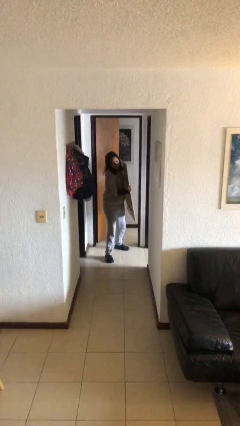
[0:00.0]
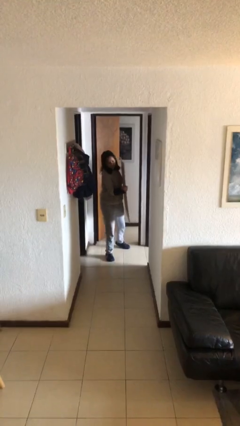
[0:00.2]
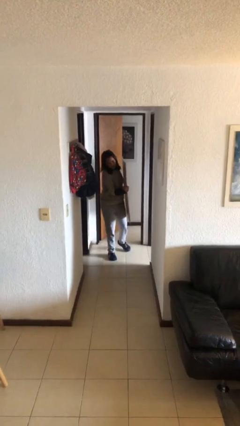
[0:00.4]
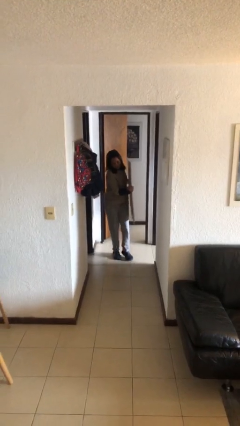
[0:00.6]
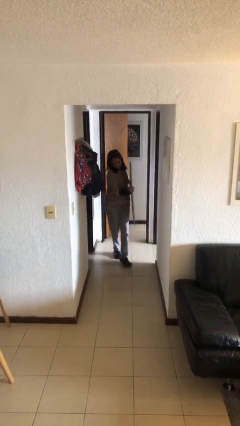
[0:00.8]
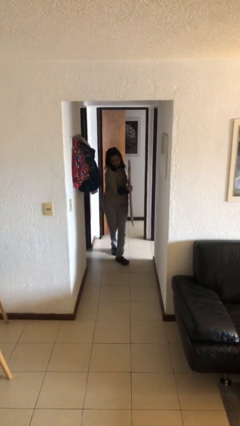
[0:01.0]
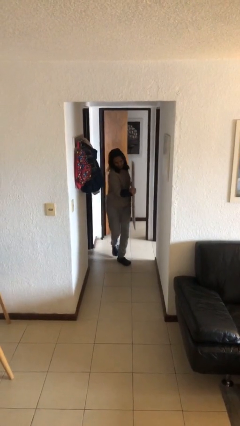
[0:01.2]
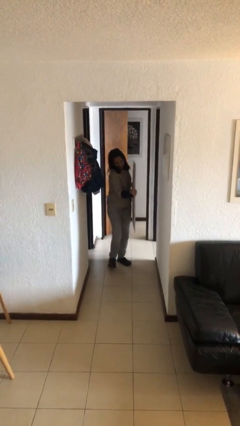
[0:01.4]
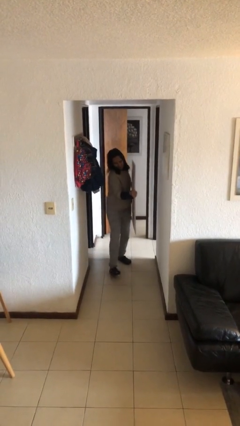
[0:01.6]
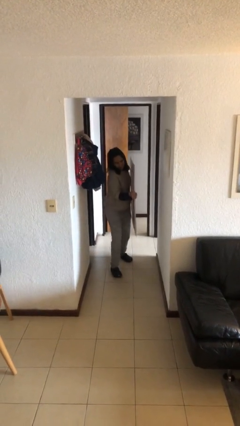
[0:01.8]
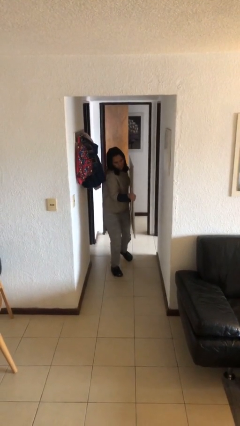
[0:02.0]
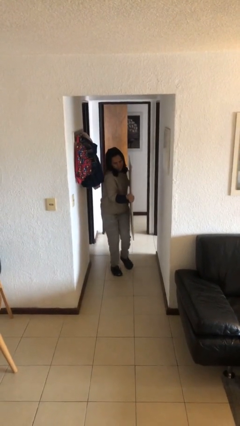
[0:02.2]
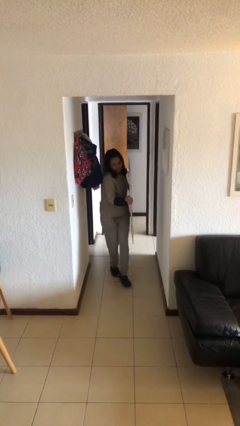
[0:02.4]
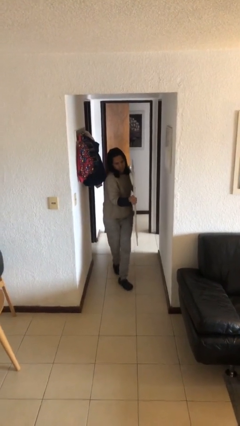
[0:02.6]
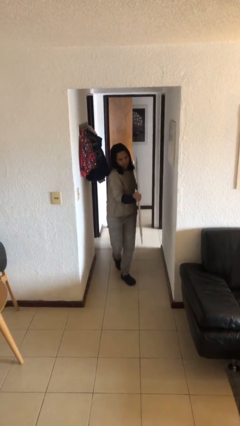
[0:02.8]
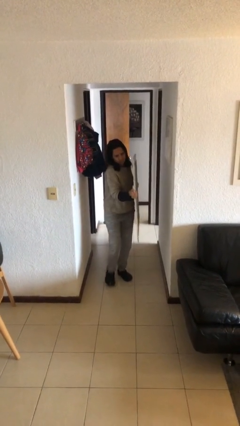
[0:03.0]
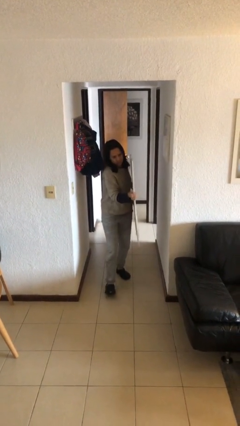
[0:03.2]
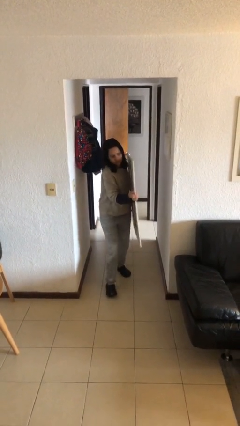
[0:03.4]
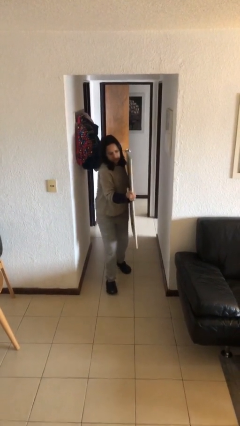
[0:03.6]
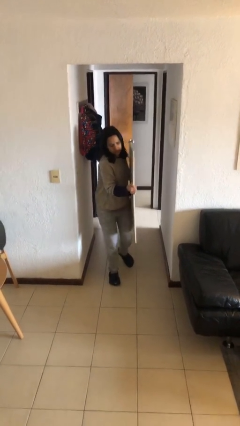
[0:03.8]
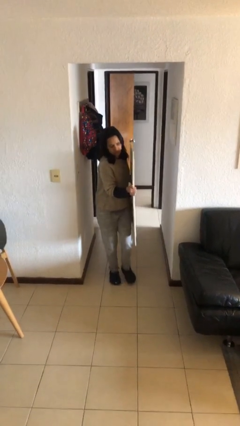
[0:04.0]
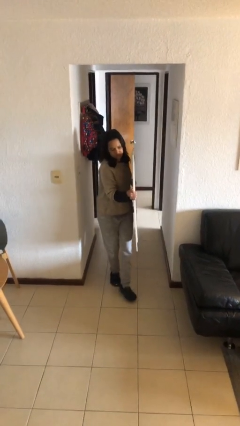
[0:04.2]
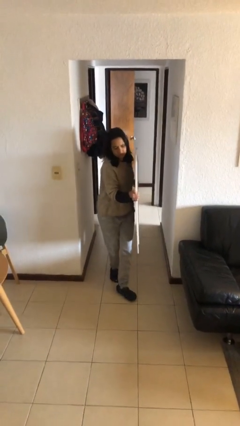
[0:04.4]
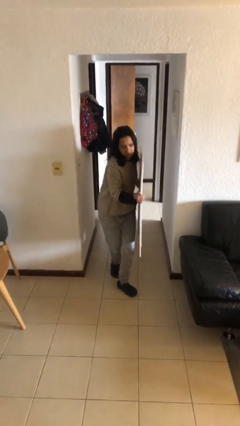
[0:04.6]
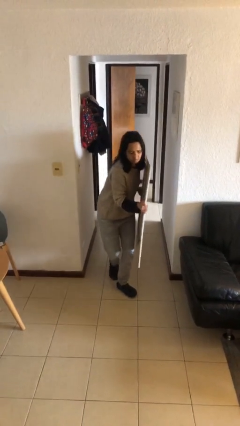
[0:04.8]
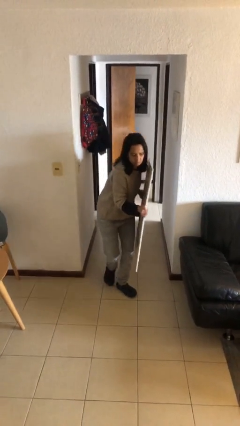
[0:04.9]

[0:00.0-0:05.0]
person carries heavy object

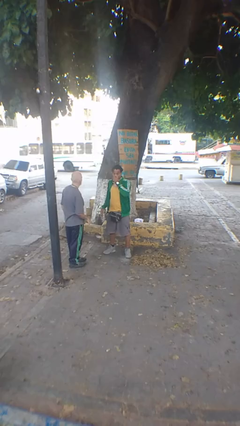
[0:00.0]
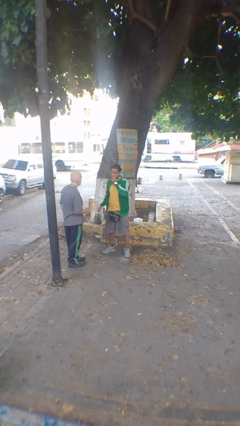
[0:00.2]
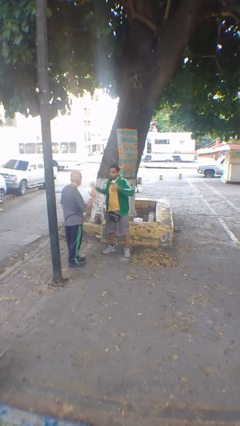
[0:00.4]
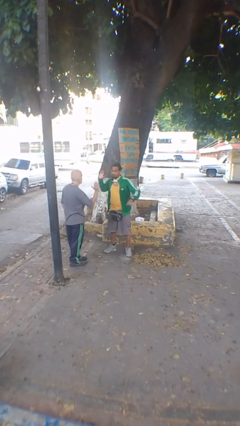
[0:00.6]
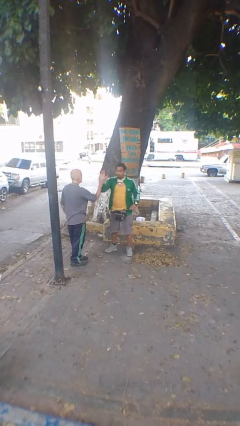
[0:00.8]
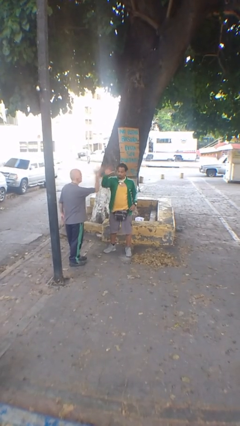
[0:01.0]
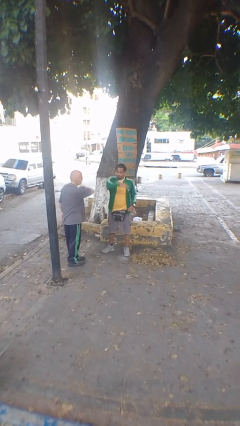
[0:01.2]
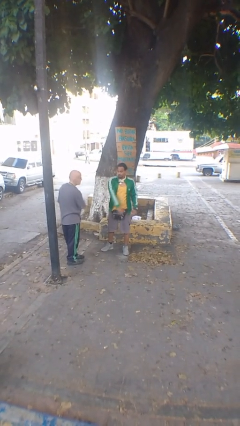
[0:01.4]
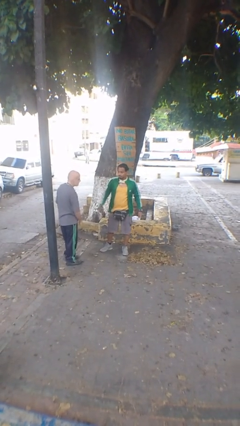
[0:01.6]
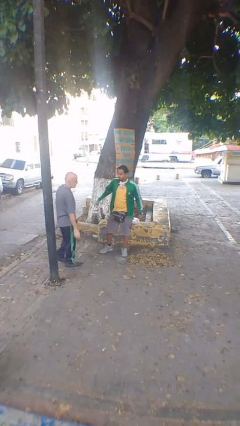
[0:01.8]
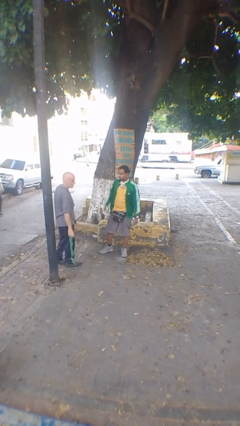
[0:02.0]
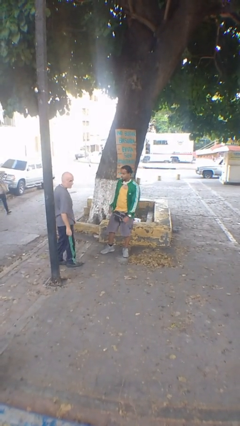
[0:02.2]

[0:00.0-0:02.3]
person highfives hand

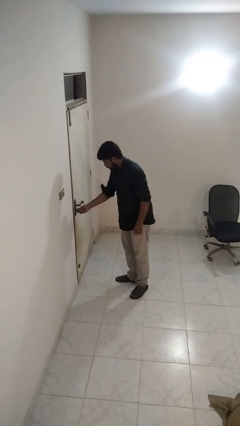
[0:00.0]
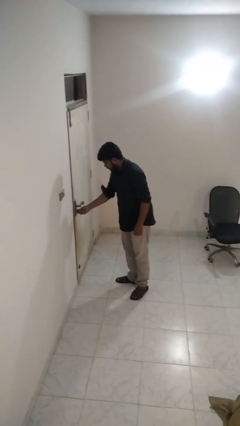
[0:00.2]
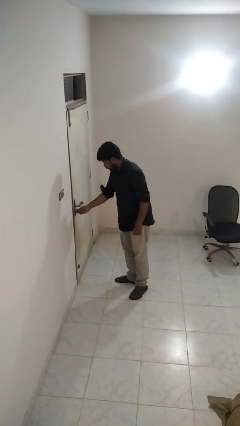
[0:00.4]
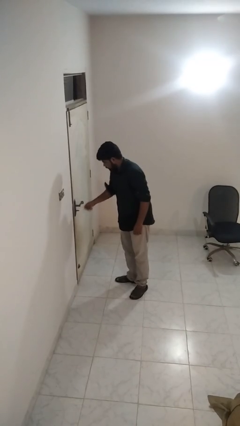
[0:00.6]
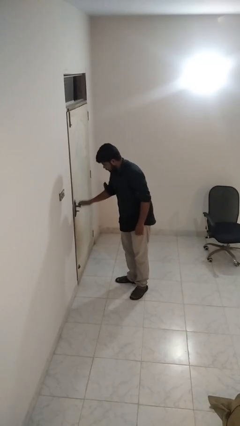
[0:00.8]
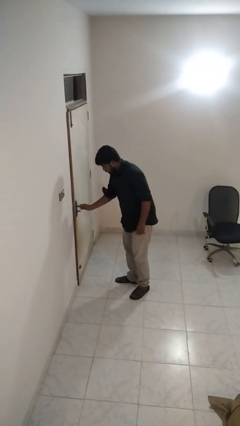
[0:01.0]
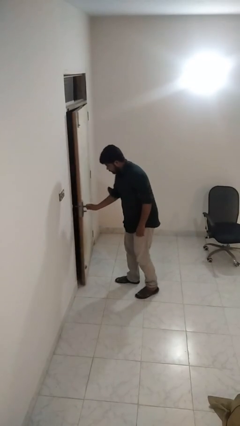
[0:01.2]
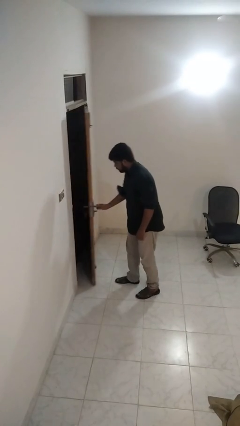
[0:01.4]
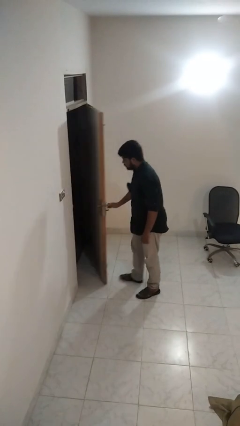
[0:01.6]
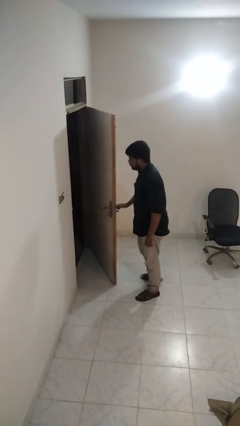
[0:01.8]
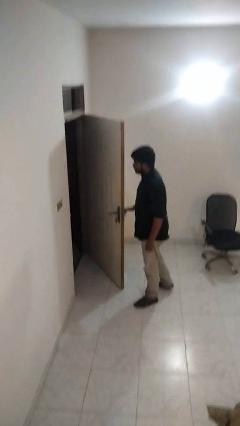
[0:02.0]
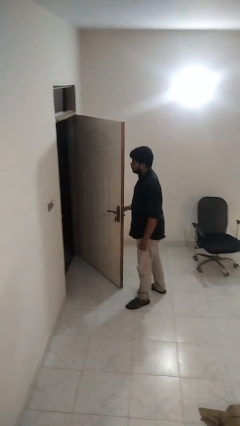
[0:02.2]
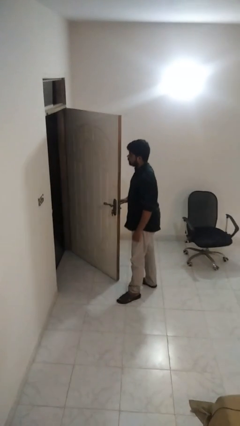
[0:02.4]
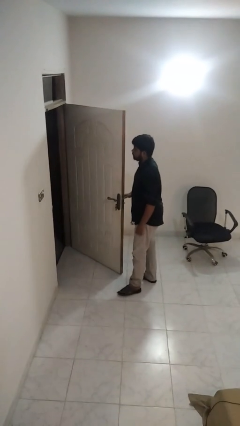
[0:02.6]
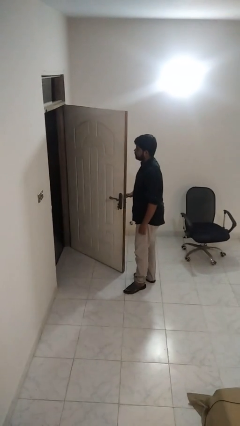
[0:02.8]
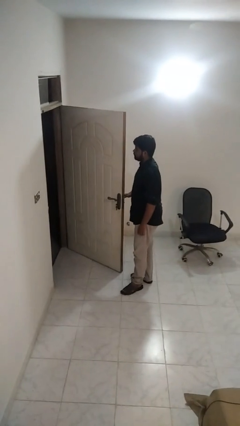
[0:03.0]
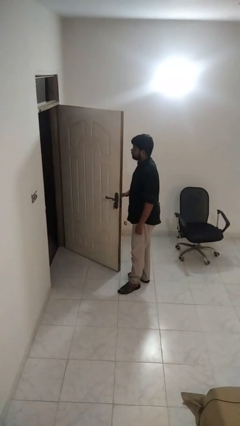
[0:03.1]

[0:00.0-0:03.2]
person opens facility door

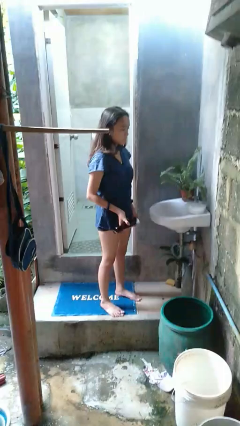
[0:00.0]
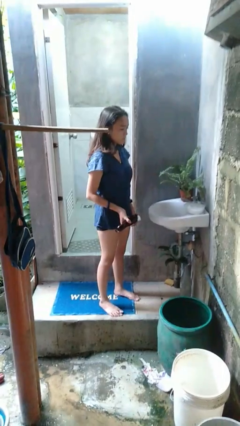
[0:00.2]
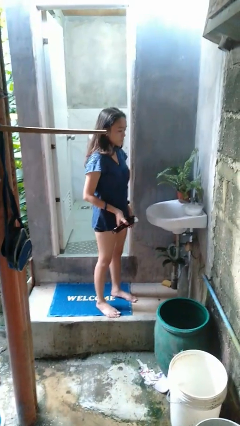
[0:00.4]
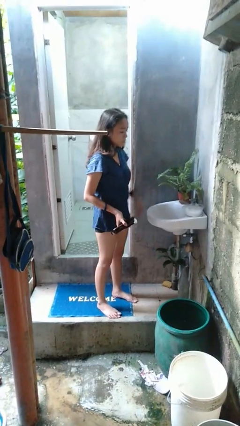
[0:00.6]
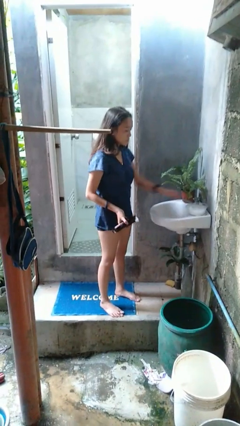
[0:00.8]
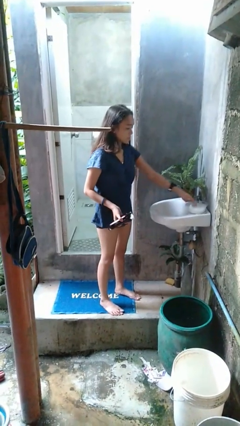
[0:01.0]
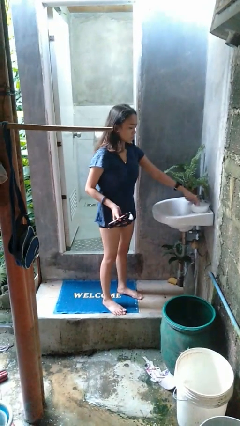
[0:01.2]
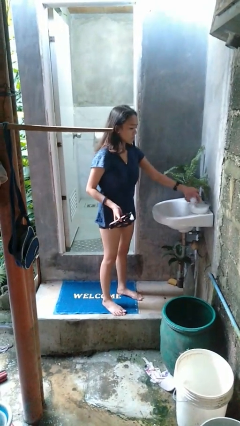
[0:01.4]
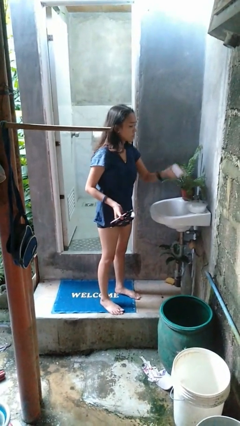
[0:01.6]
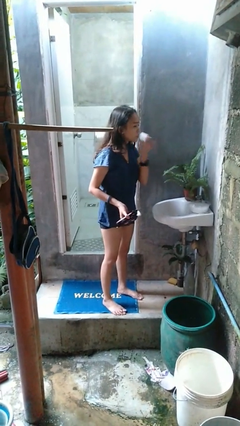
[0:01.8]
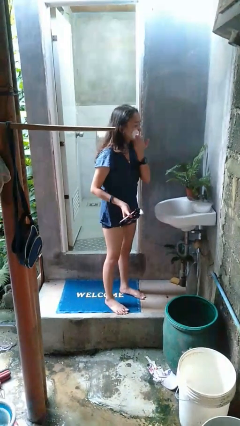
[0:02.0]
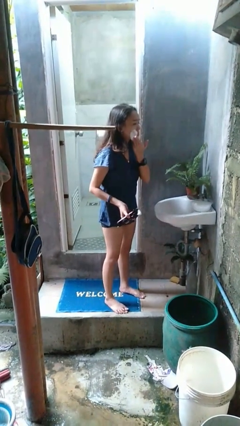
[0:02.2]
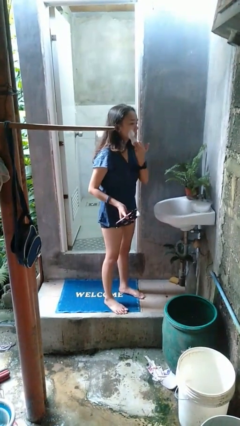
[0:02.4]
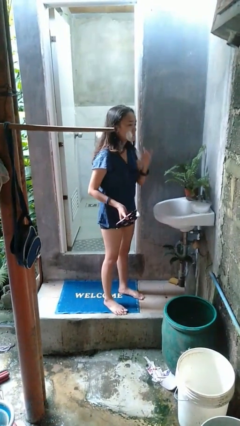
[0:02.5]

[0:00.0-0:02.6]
person applies shaving cream

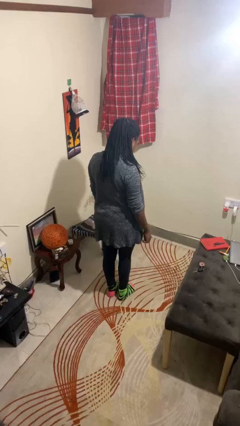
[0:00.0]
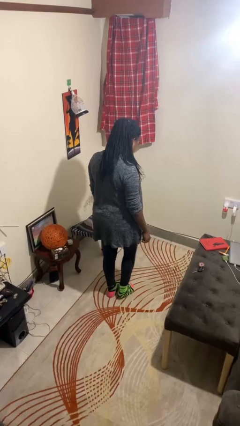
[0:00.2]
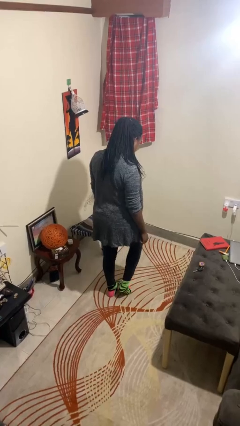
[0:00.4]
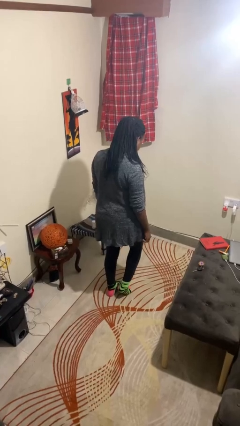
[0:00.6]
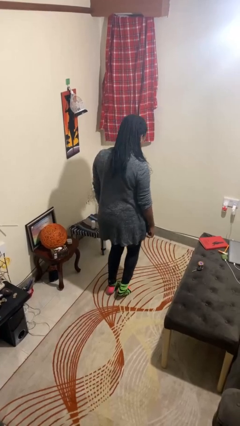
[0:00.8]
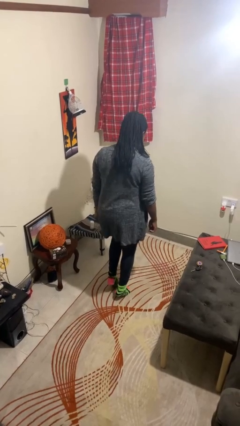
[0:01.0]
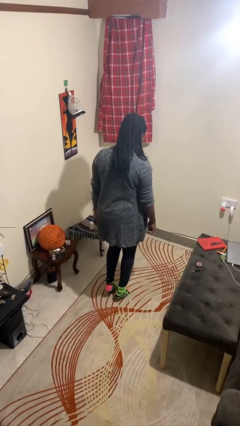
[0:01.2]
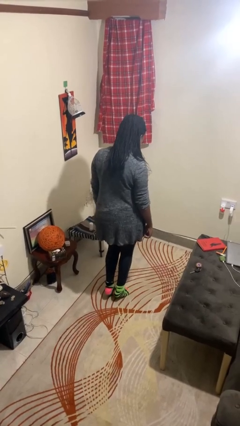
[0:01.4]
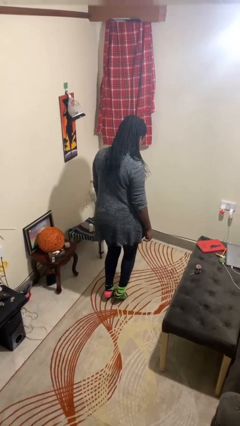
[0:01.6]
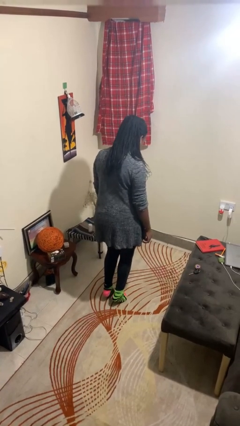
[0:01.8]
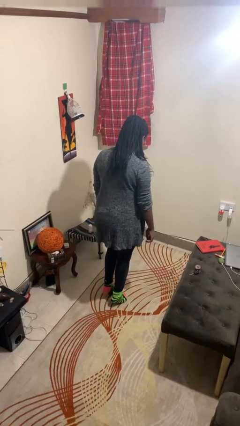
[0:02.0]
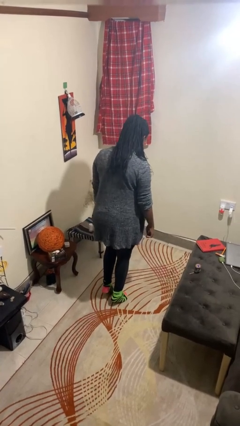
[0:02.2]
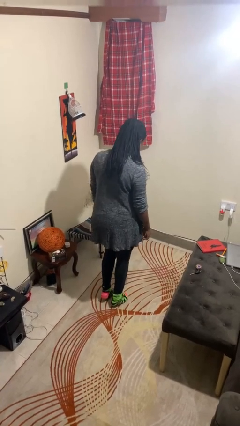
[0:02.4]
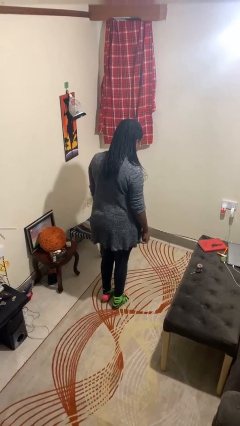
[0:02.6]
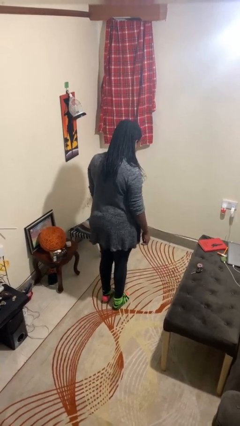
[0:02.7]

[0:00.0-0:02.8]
person walks tiptoe

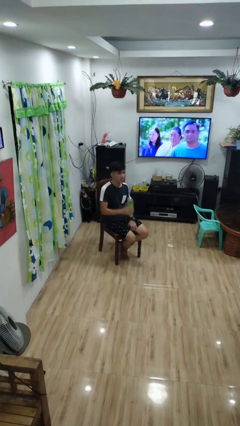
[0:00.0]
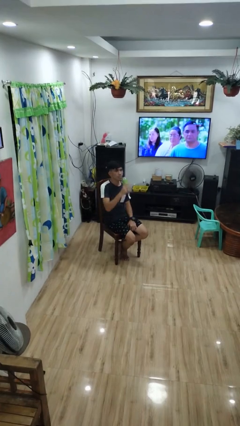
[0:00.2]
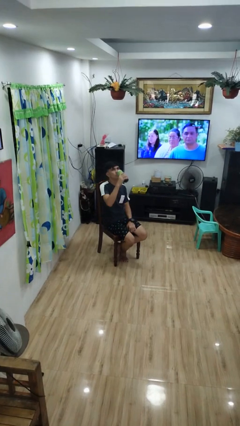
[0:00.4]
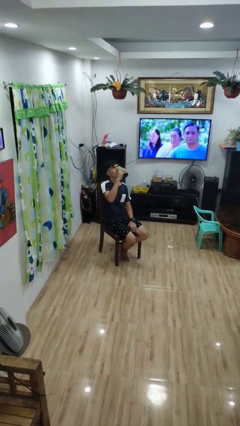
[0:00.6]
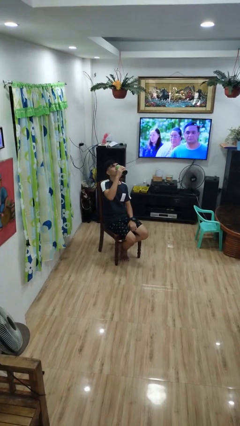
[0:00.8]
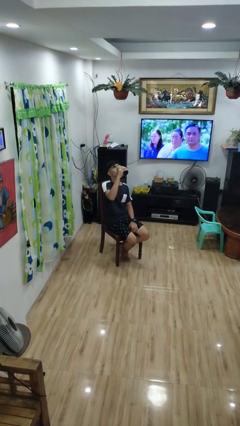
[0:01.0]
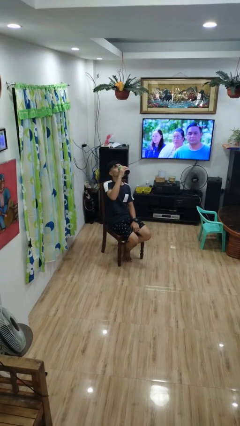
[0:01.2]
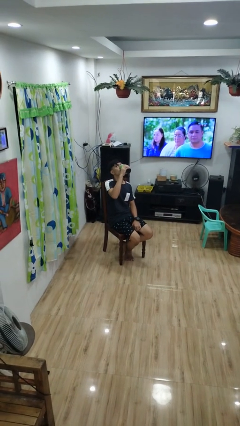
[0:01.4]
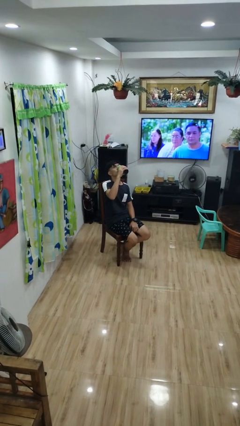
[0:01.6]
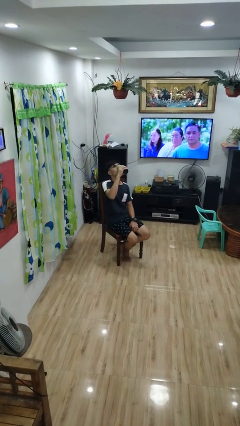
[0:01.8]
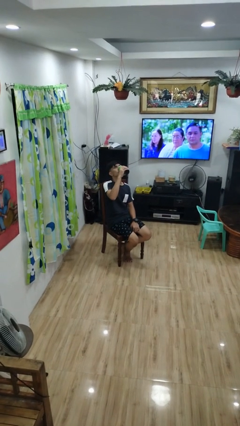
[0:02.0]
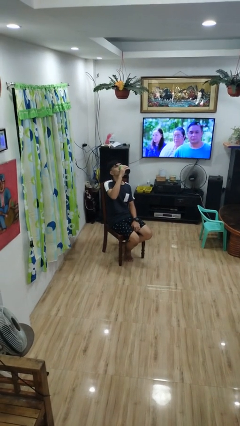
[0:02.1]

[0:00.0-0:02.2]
person drinks from bottle
